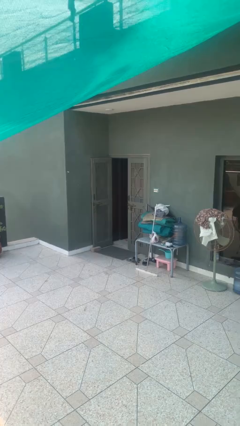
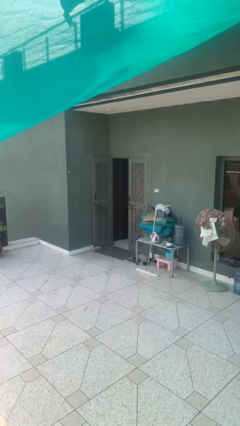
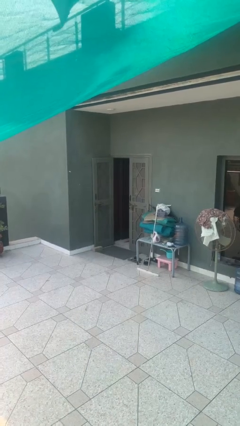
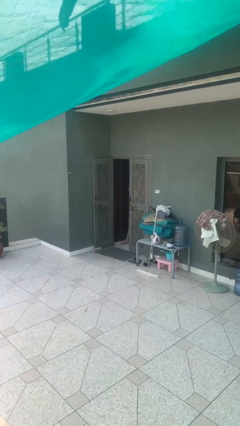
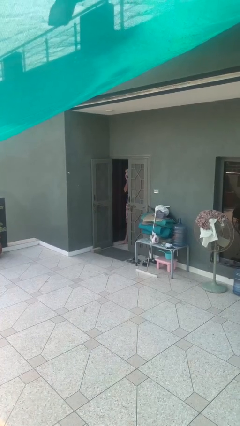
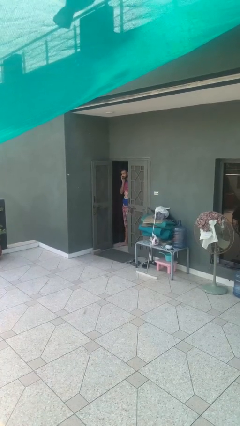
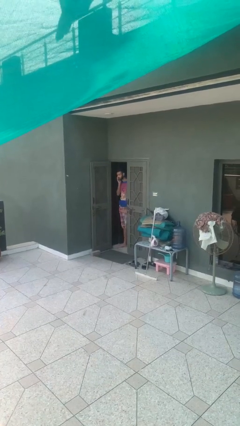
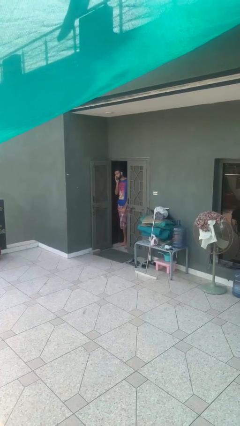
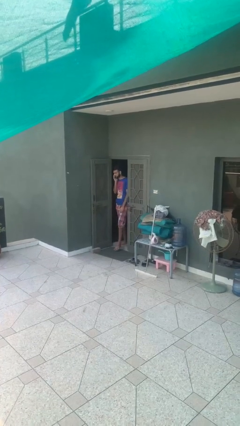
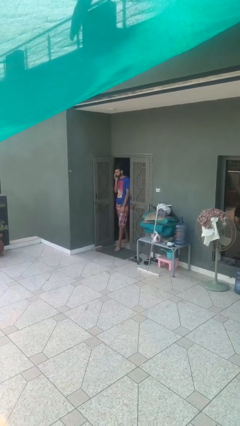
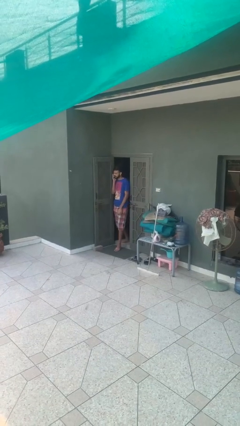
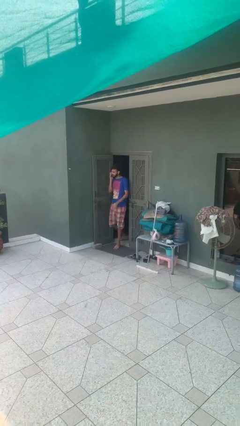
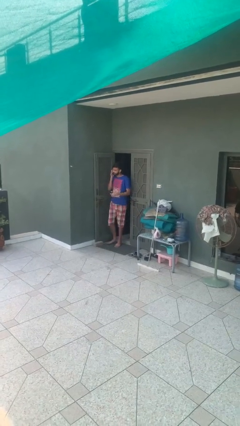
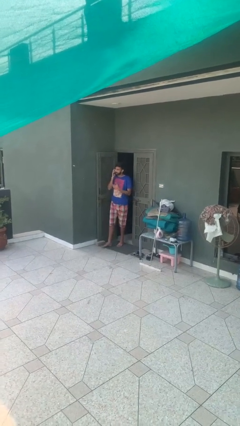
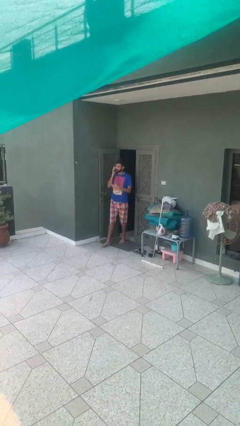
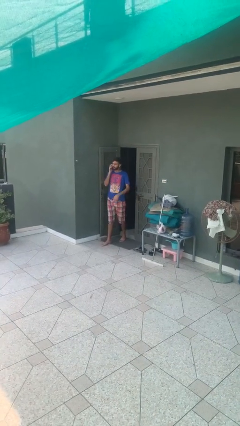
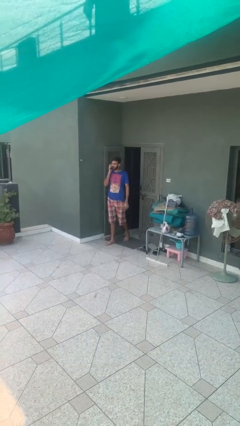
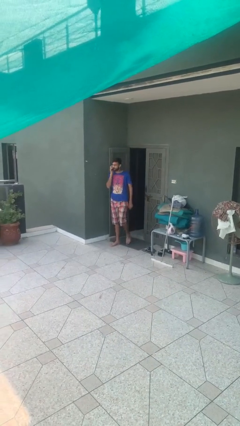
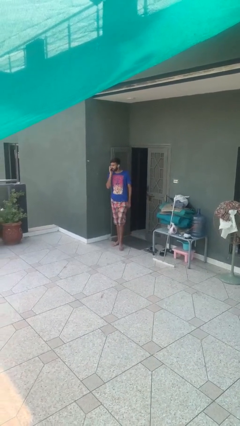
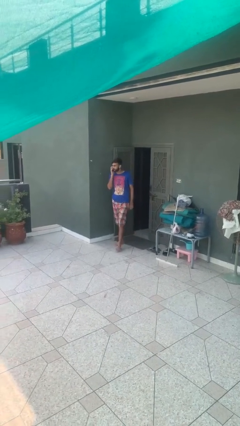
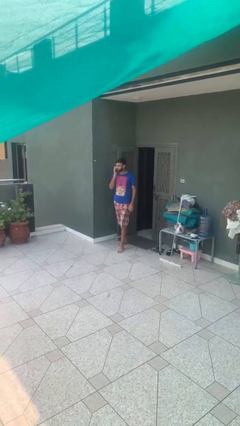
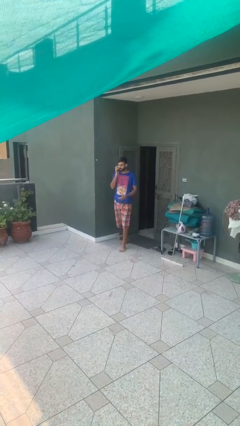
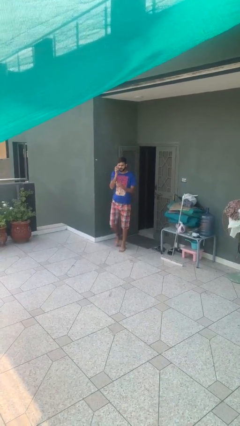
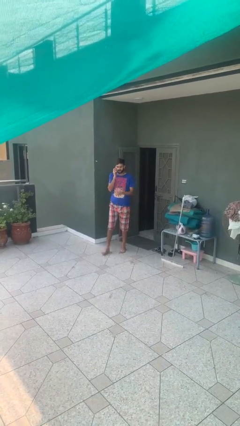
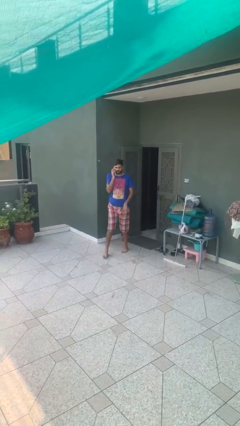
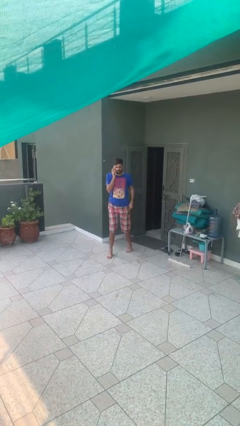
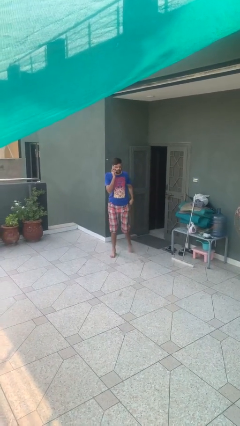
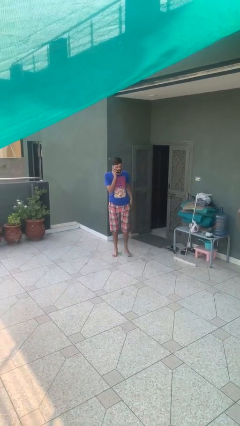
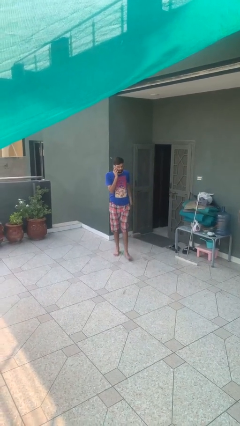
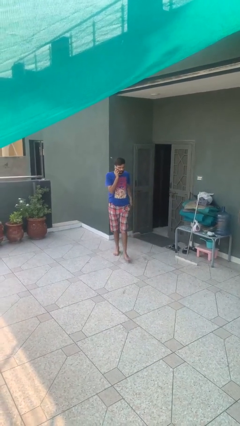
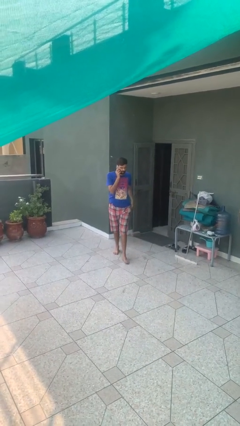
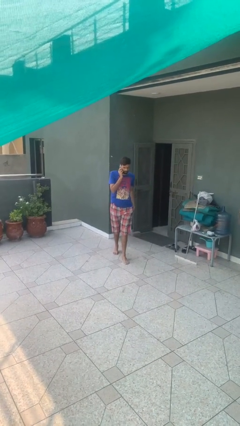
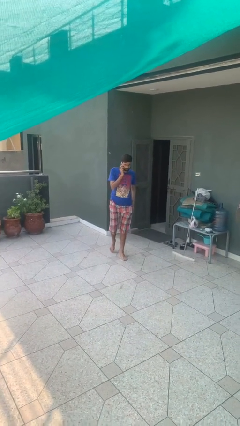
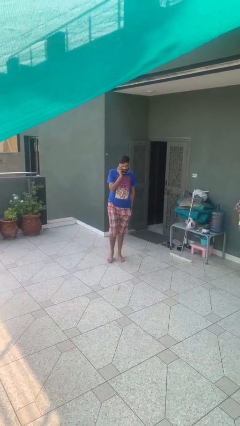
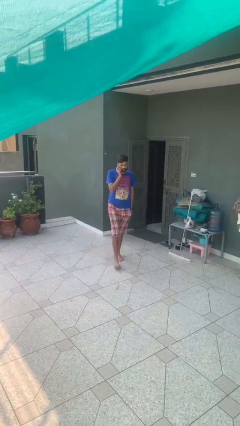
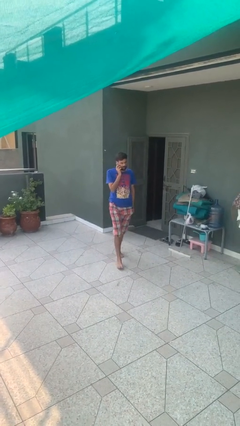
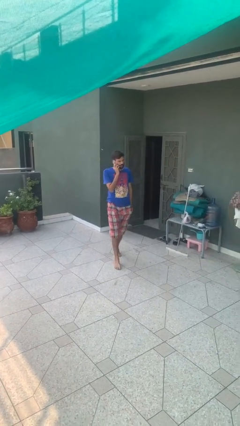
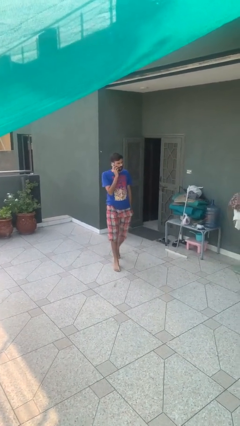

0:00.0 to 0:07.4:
person enters scene through structure

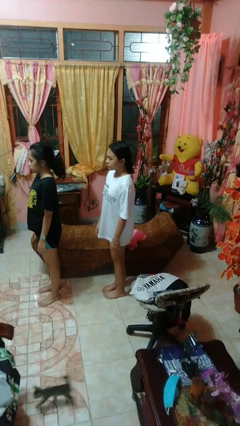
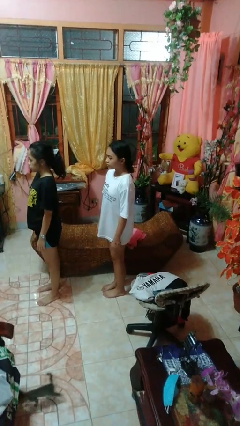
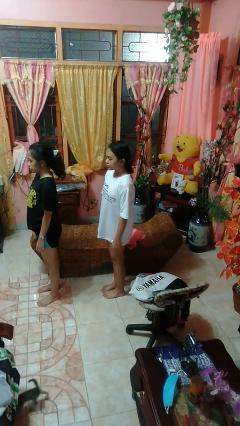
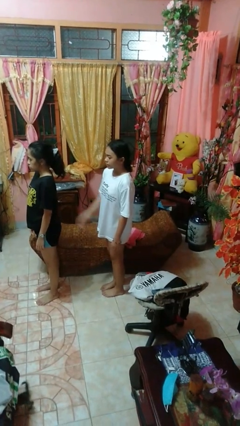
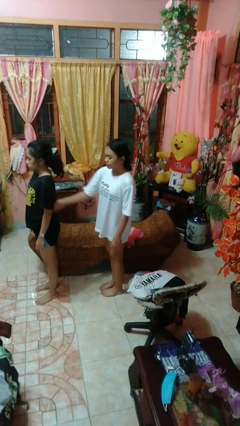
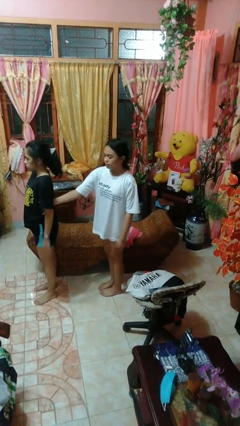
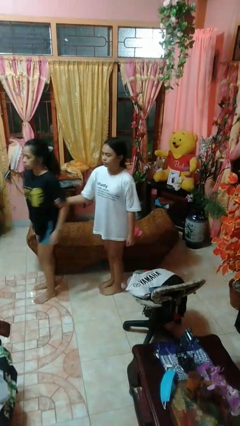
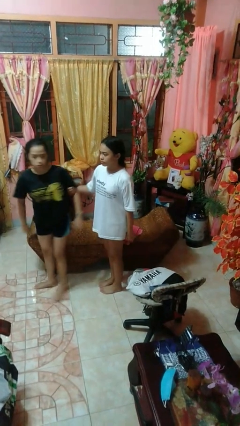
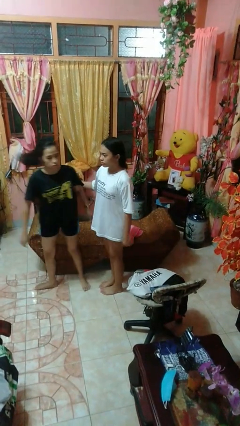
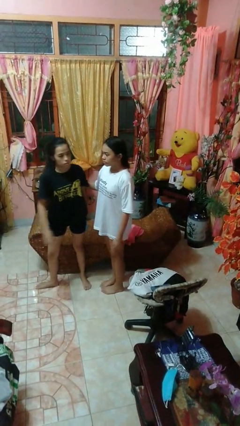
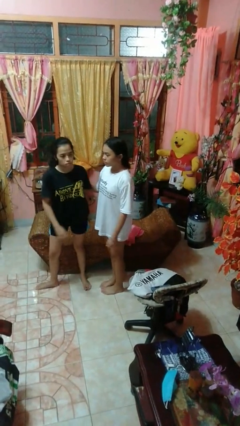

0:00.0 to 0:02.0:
person grabs person by bicep

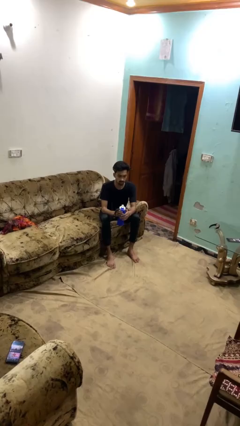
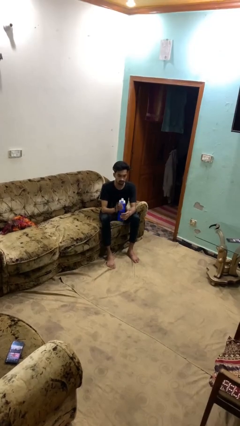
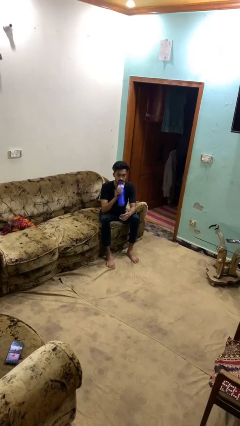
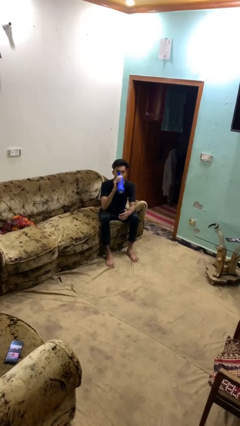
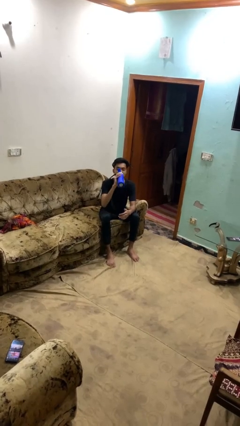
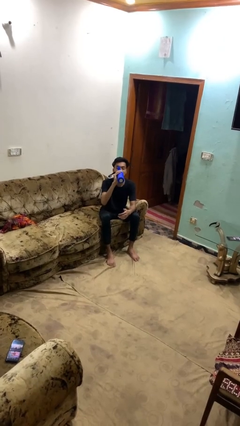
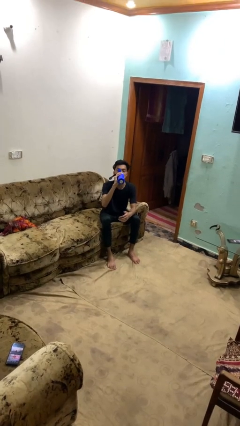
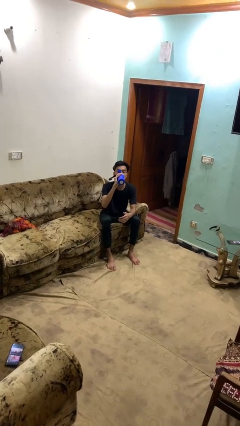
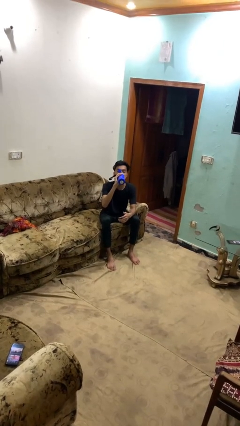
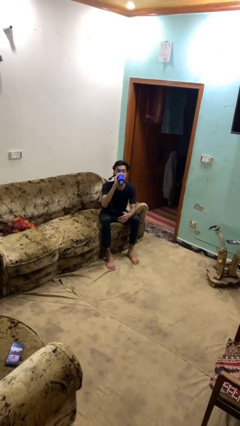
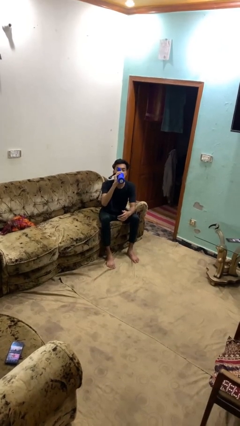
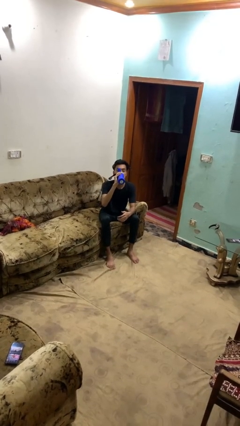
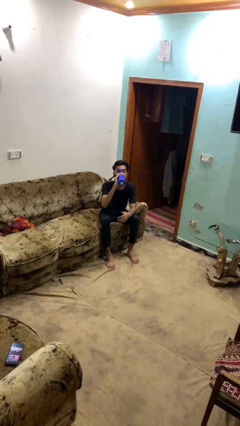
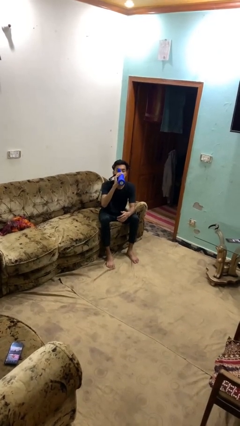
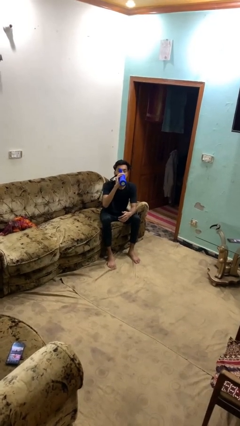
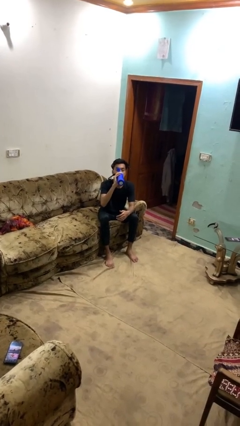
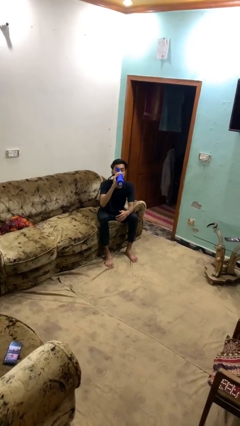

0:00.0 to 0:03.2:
person drinks from bottle

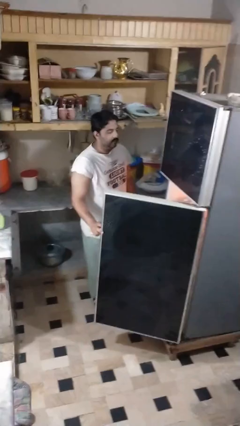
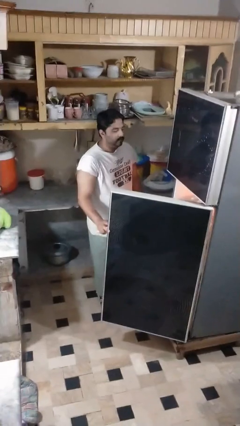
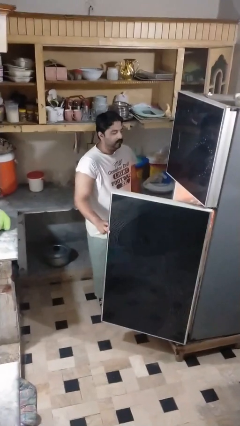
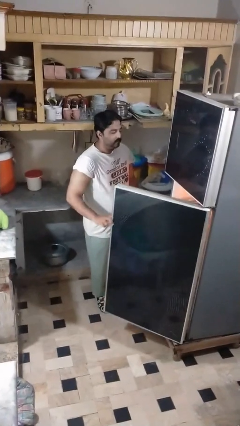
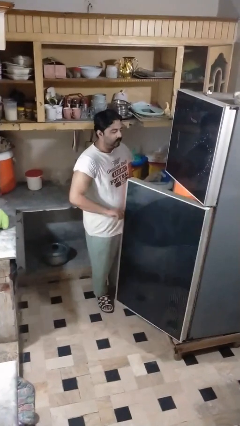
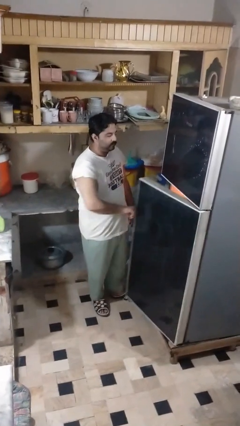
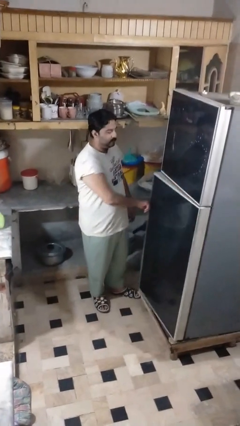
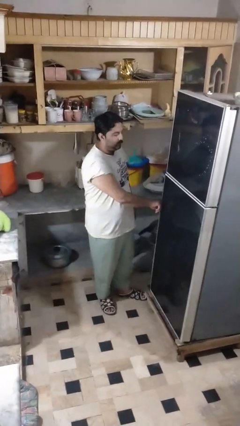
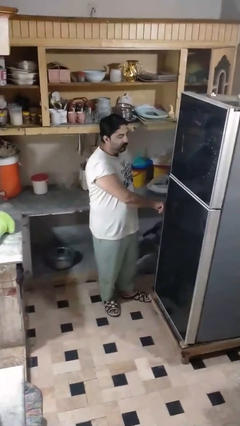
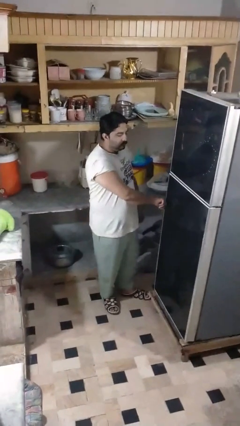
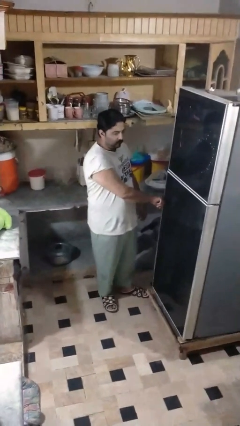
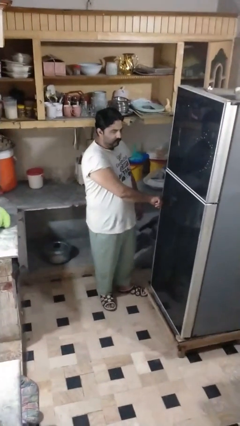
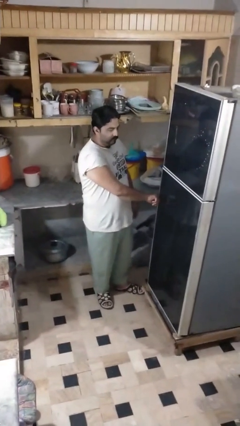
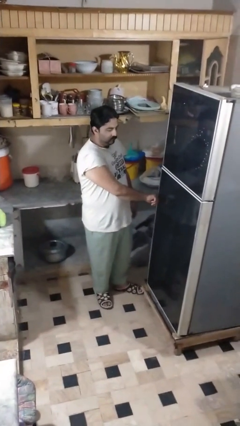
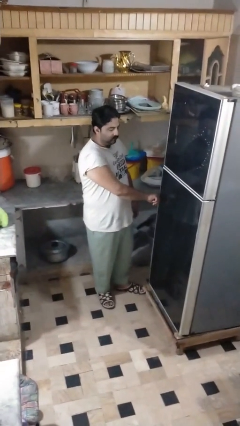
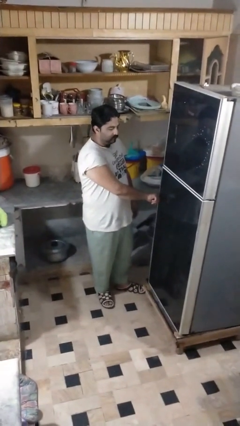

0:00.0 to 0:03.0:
person closes refrigerator

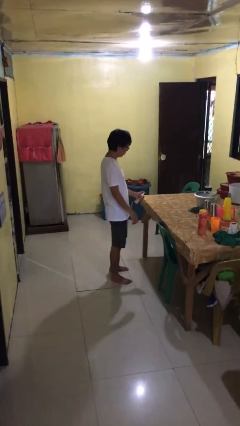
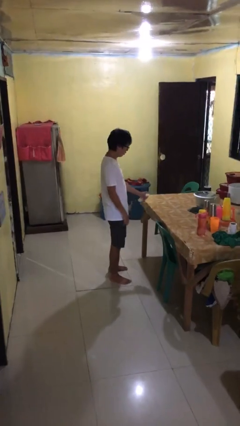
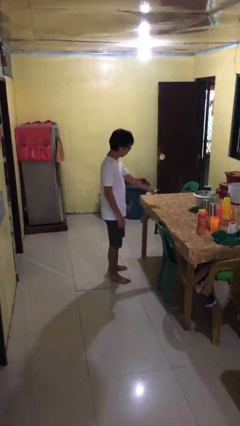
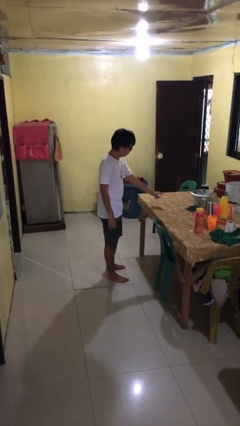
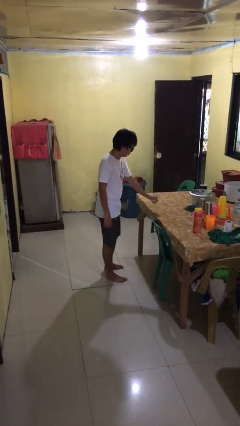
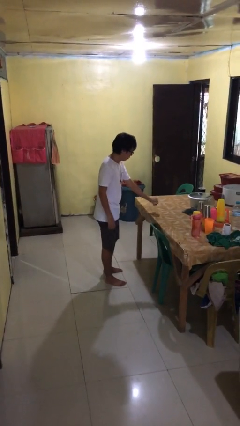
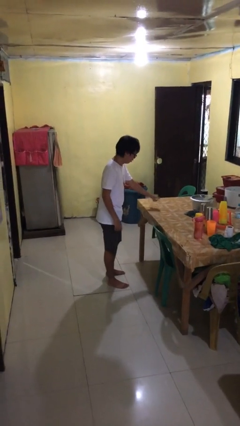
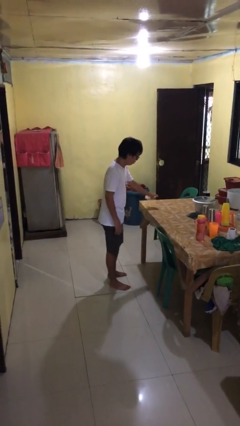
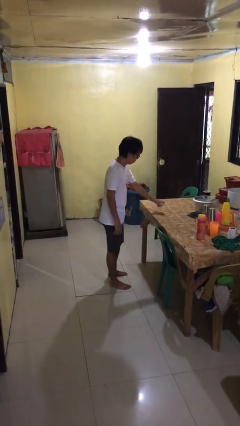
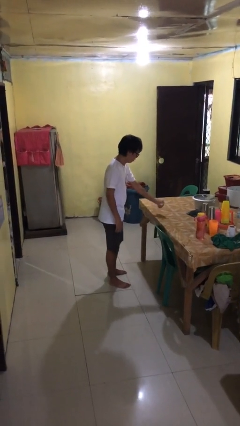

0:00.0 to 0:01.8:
person sprays from bottle
